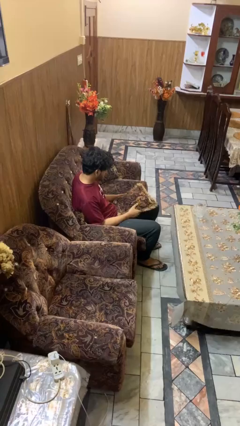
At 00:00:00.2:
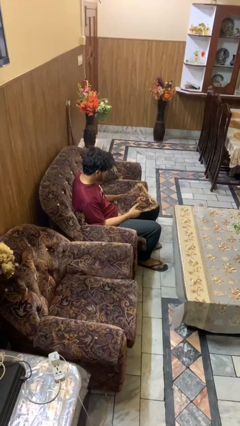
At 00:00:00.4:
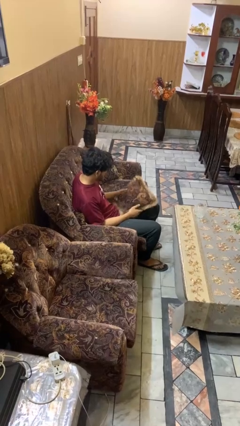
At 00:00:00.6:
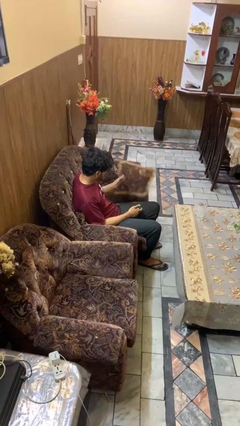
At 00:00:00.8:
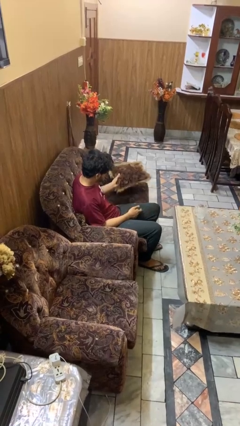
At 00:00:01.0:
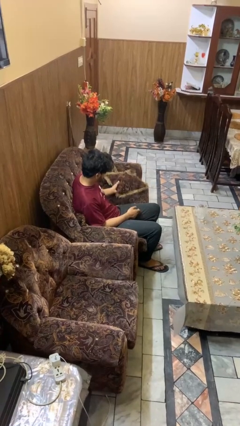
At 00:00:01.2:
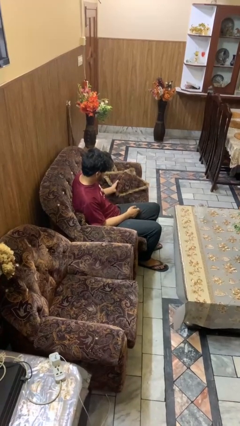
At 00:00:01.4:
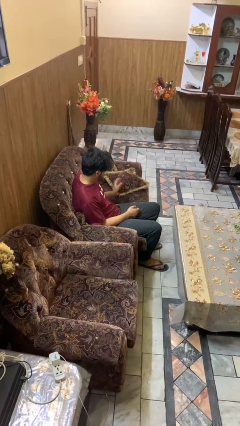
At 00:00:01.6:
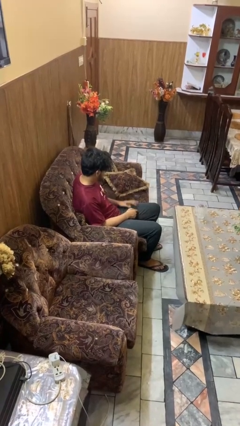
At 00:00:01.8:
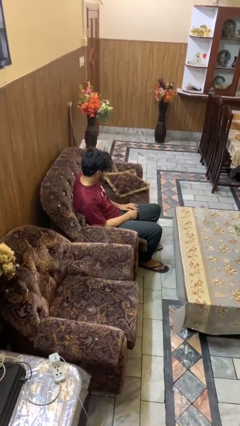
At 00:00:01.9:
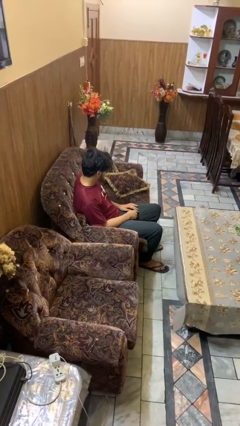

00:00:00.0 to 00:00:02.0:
person puts down object on couch

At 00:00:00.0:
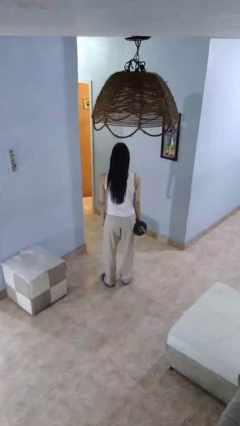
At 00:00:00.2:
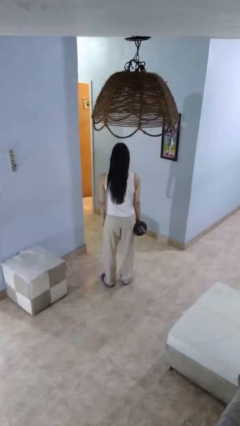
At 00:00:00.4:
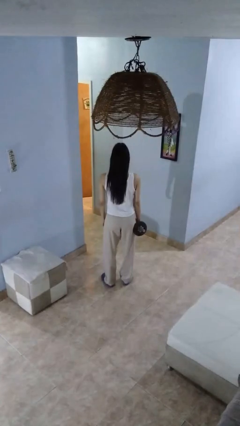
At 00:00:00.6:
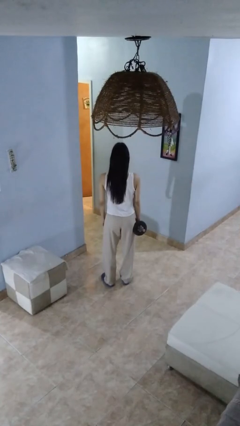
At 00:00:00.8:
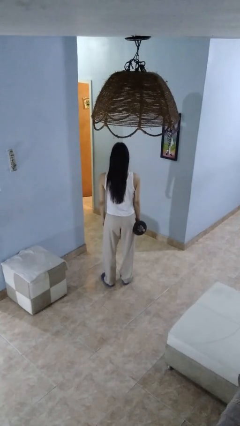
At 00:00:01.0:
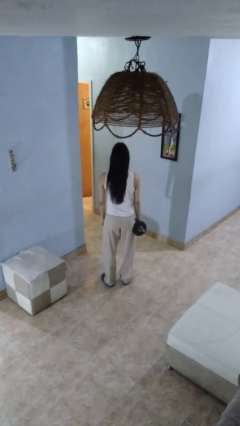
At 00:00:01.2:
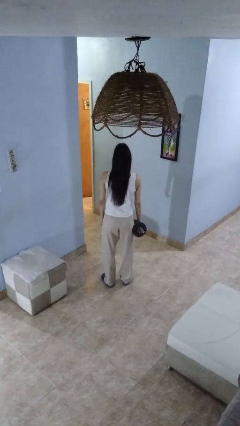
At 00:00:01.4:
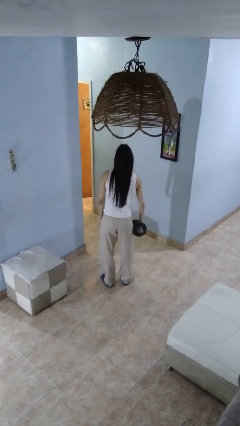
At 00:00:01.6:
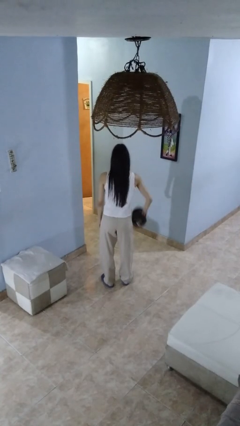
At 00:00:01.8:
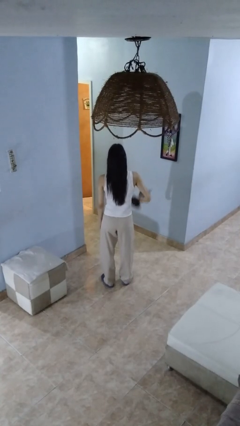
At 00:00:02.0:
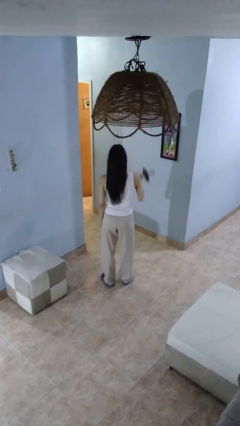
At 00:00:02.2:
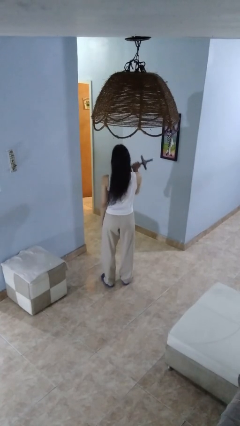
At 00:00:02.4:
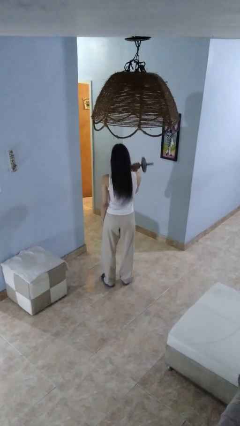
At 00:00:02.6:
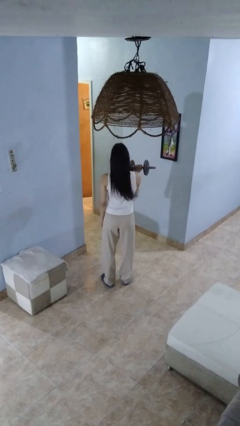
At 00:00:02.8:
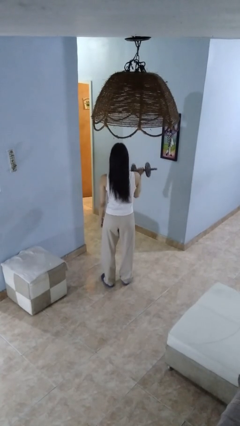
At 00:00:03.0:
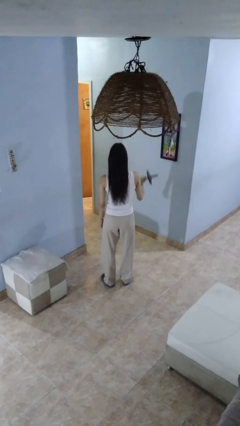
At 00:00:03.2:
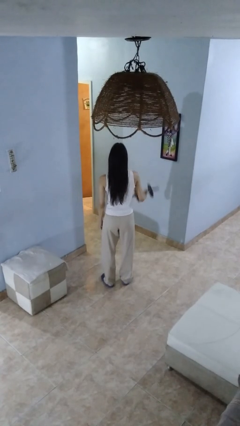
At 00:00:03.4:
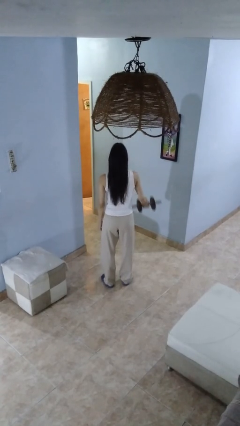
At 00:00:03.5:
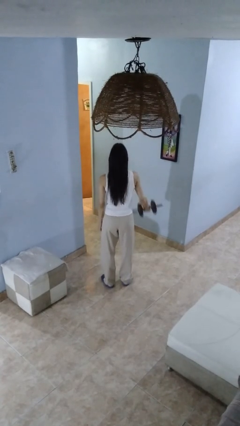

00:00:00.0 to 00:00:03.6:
person lifts dumbbells

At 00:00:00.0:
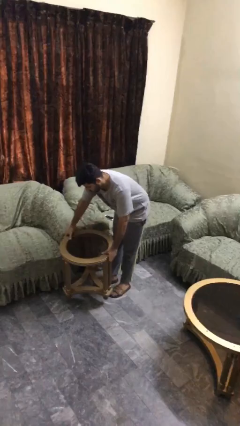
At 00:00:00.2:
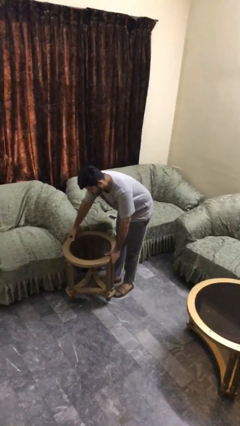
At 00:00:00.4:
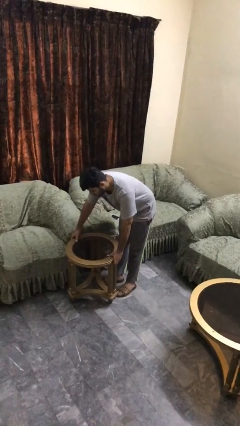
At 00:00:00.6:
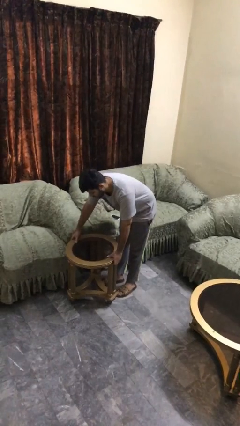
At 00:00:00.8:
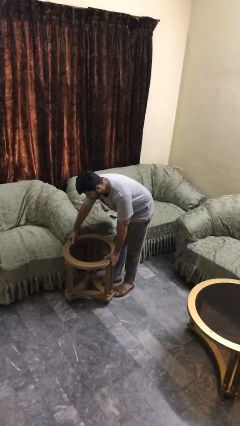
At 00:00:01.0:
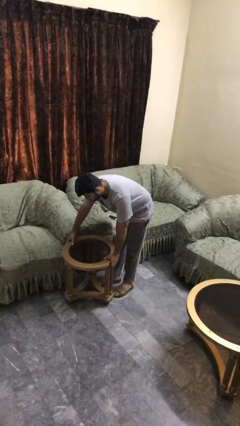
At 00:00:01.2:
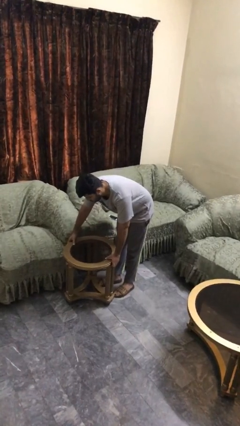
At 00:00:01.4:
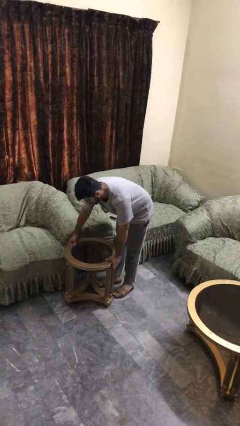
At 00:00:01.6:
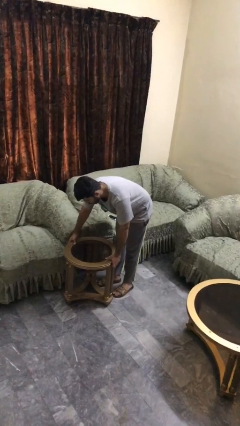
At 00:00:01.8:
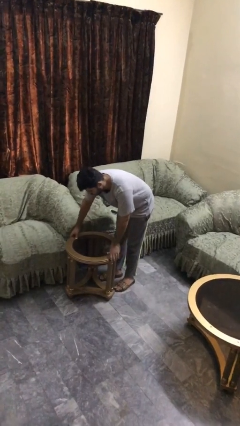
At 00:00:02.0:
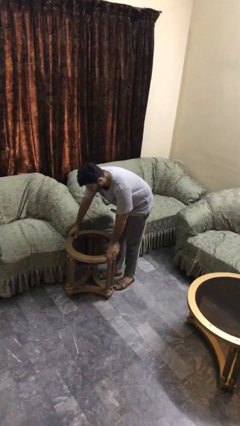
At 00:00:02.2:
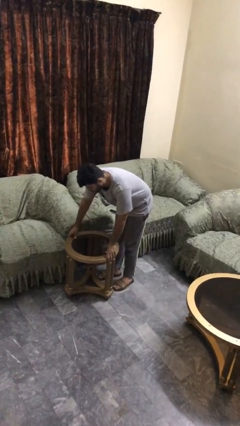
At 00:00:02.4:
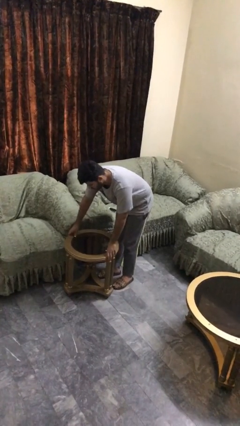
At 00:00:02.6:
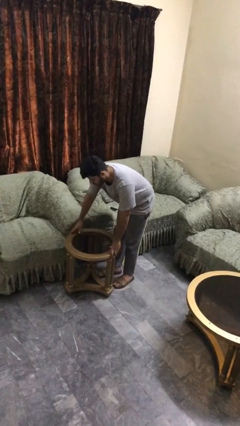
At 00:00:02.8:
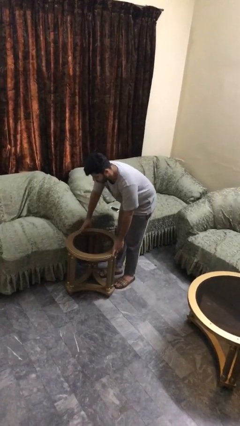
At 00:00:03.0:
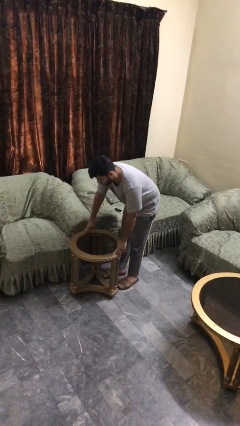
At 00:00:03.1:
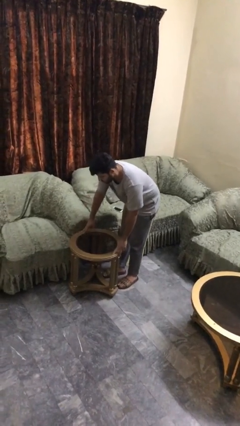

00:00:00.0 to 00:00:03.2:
person puts down object on floor

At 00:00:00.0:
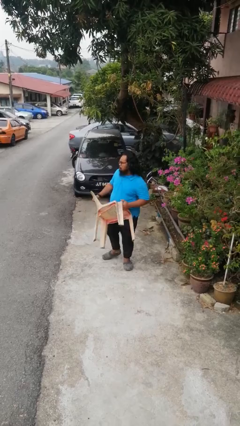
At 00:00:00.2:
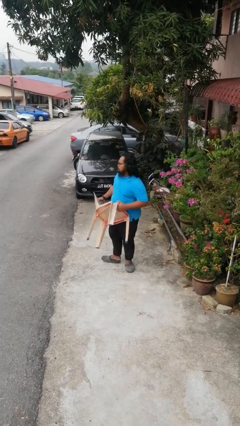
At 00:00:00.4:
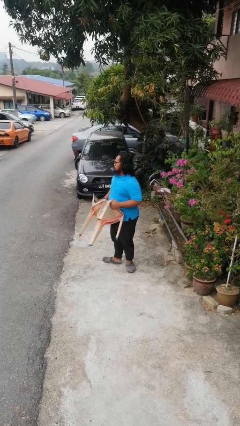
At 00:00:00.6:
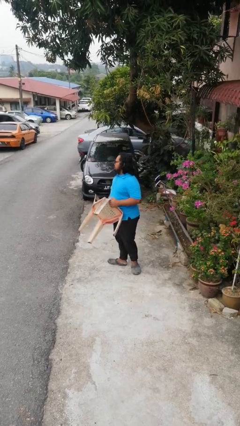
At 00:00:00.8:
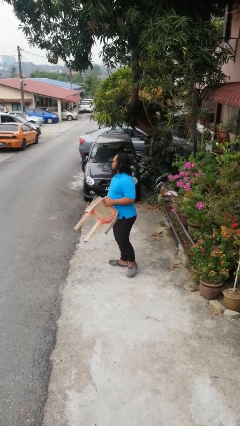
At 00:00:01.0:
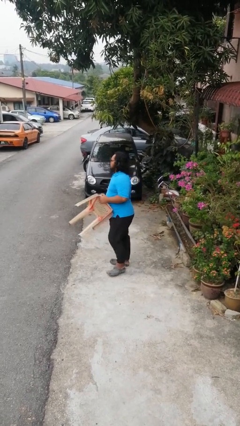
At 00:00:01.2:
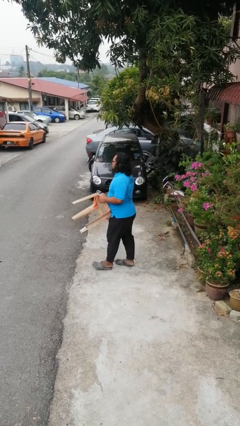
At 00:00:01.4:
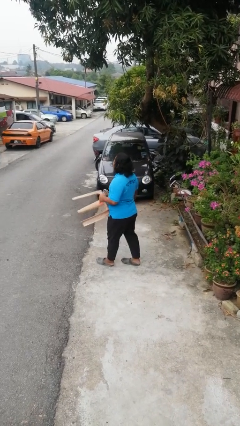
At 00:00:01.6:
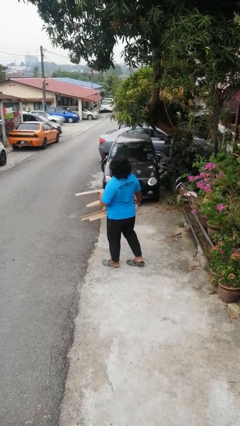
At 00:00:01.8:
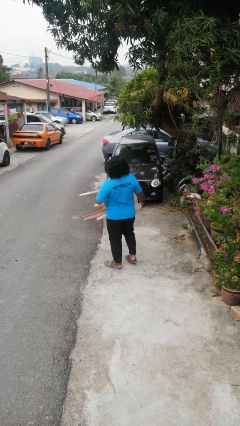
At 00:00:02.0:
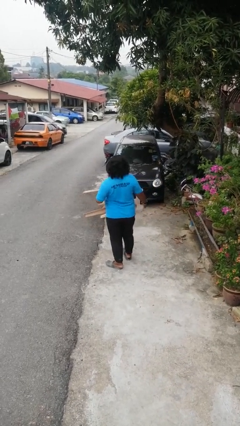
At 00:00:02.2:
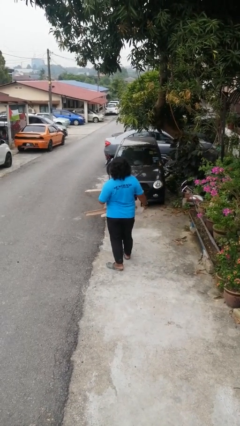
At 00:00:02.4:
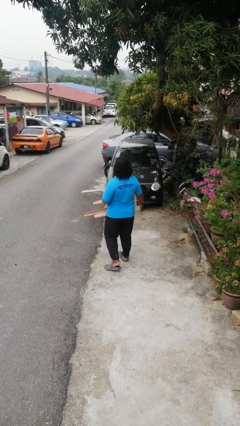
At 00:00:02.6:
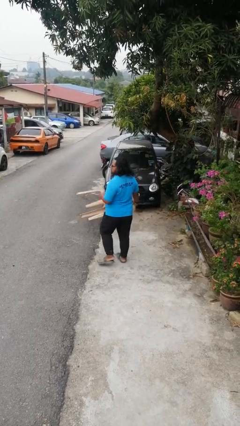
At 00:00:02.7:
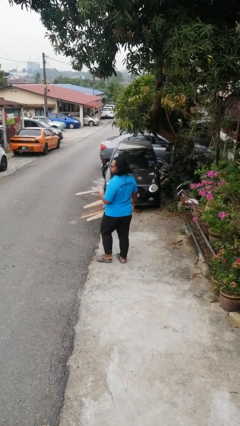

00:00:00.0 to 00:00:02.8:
person carries furniture

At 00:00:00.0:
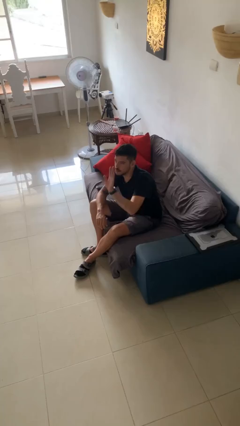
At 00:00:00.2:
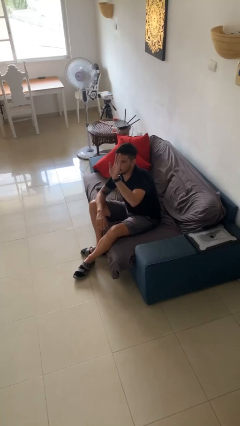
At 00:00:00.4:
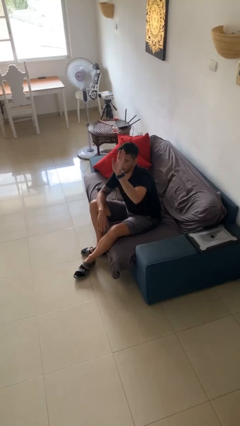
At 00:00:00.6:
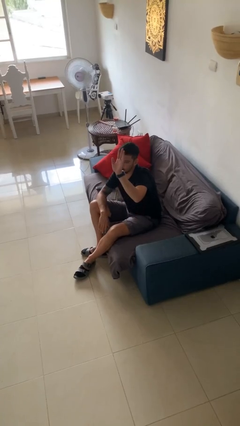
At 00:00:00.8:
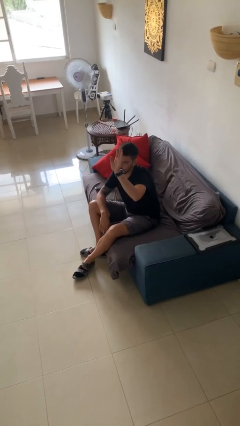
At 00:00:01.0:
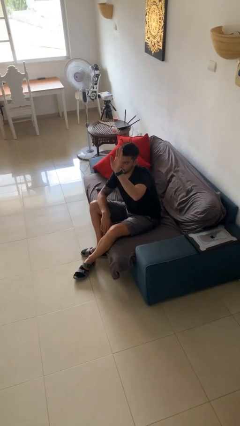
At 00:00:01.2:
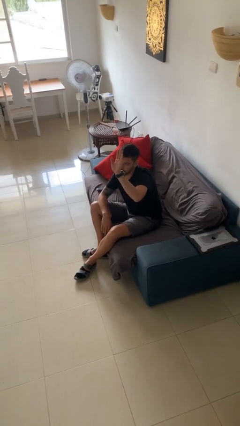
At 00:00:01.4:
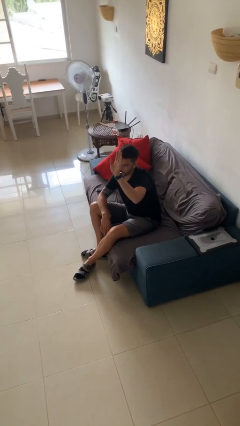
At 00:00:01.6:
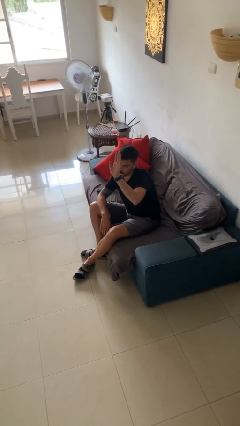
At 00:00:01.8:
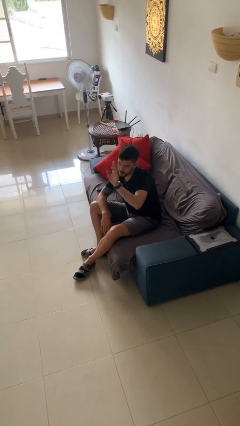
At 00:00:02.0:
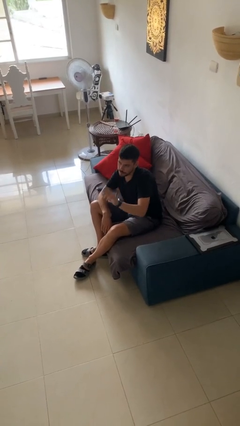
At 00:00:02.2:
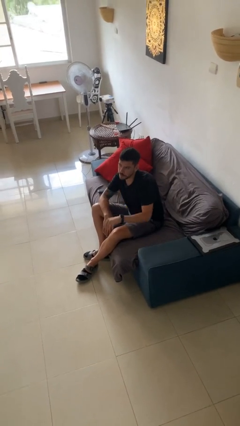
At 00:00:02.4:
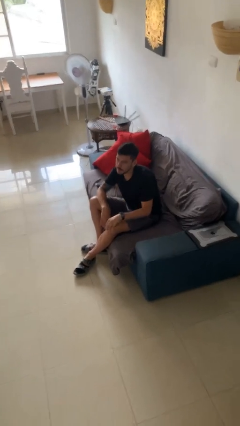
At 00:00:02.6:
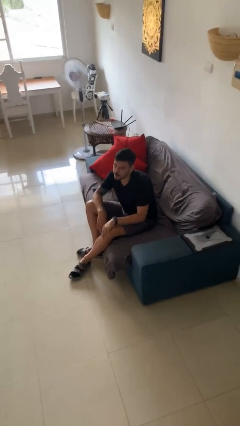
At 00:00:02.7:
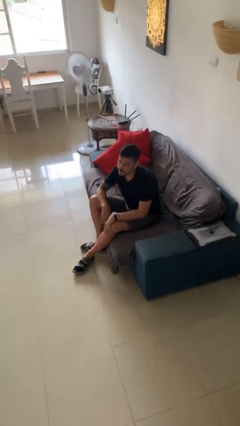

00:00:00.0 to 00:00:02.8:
person gestures raise hand

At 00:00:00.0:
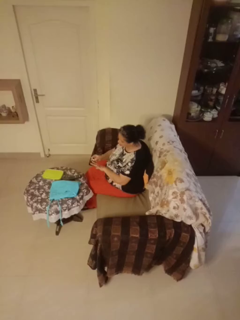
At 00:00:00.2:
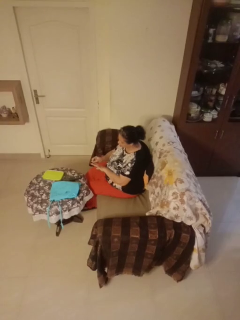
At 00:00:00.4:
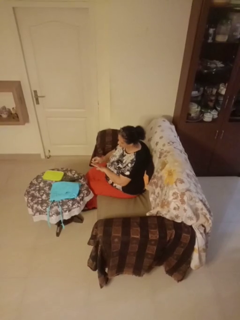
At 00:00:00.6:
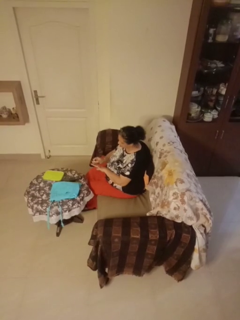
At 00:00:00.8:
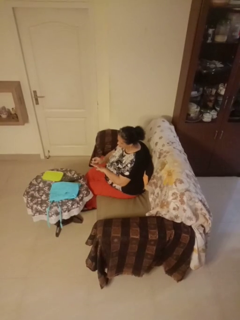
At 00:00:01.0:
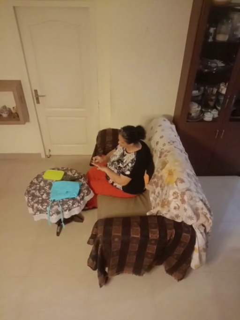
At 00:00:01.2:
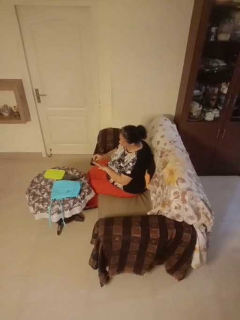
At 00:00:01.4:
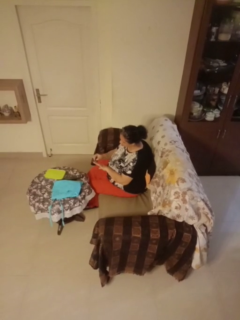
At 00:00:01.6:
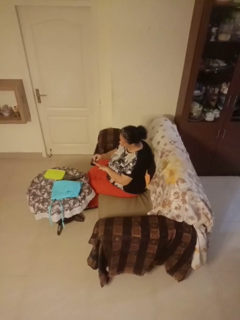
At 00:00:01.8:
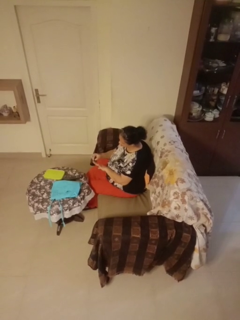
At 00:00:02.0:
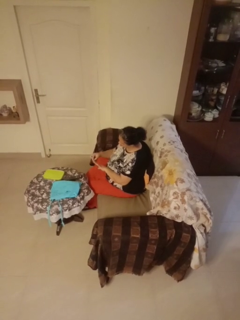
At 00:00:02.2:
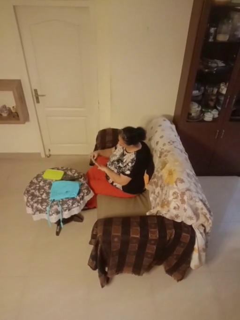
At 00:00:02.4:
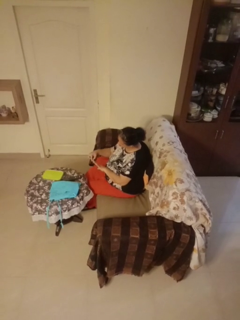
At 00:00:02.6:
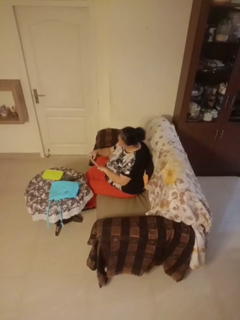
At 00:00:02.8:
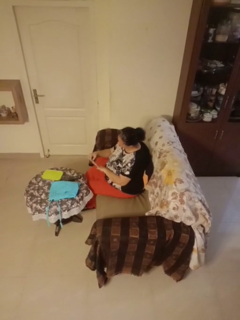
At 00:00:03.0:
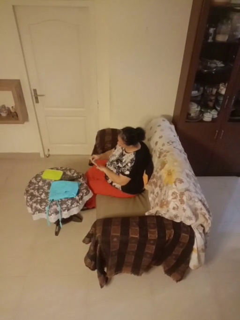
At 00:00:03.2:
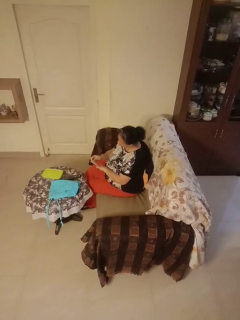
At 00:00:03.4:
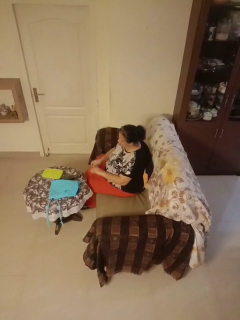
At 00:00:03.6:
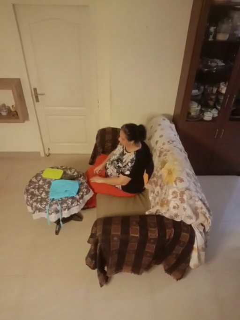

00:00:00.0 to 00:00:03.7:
person files fingernails
